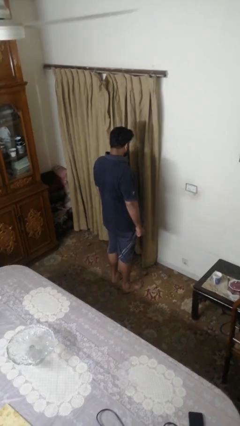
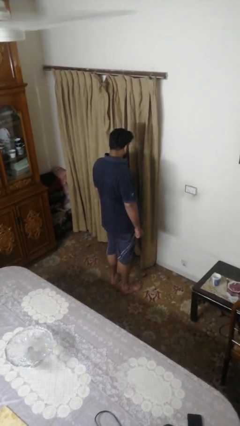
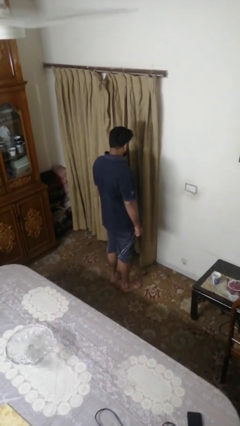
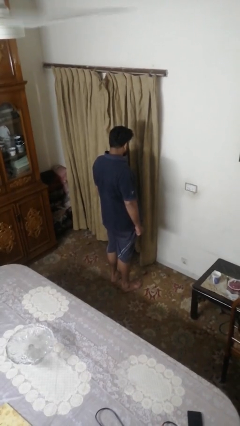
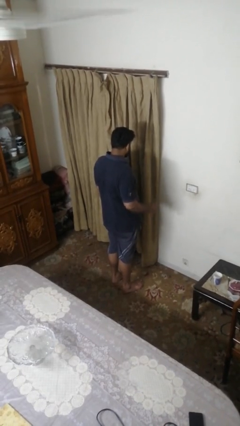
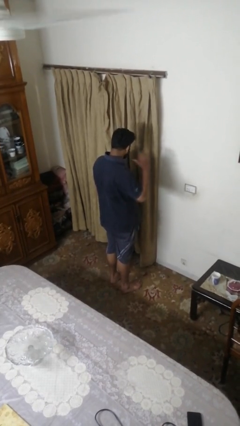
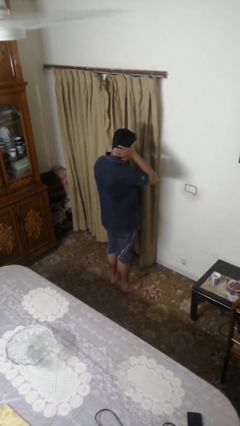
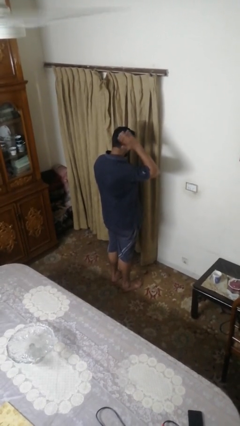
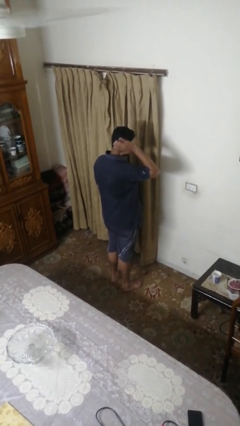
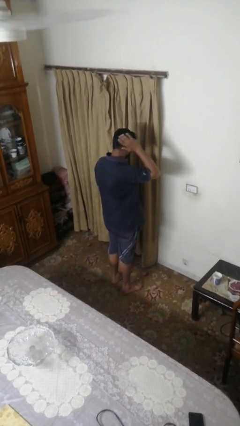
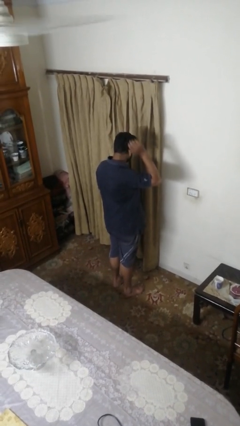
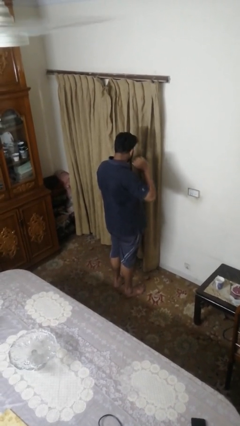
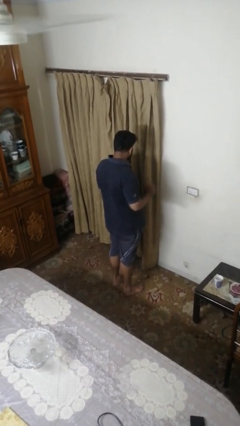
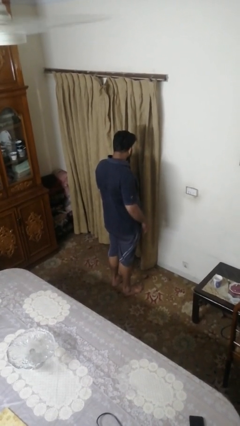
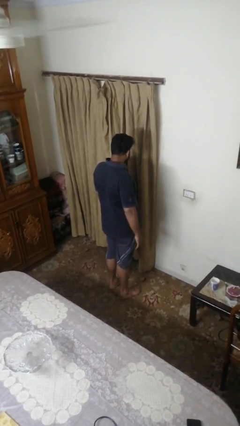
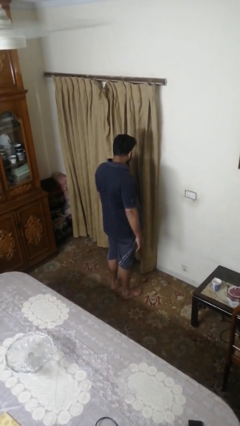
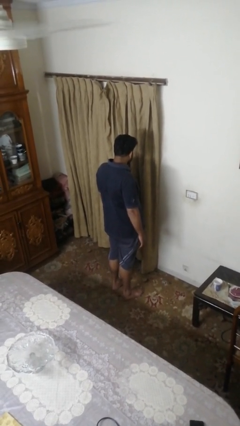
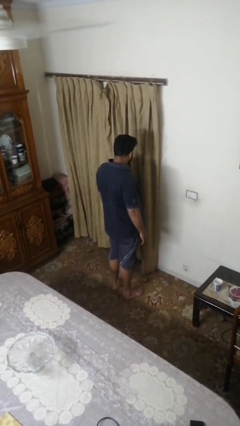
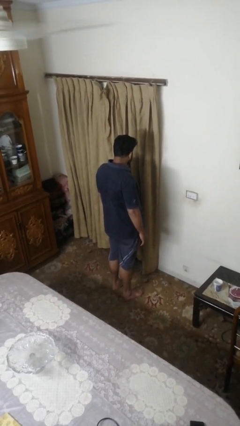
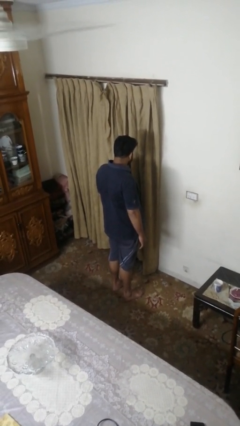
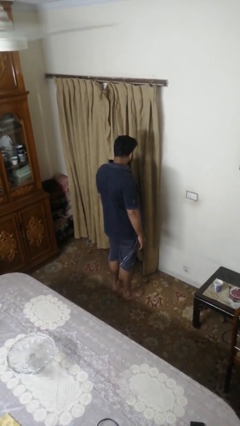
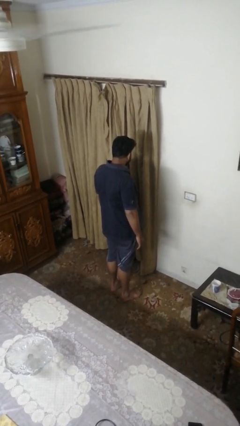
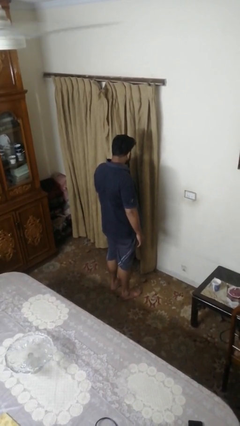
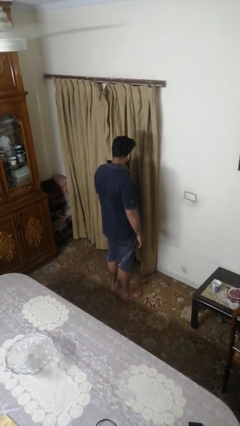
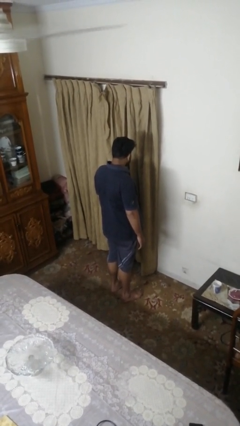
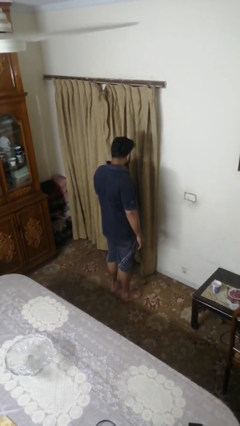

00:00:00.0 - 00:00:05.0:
person strokes hair

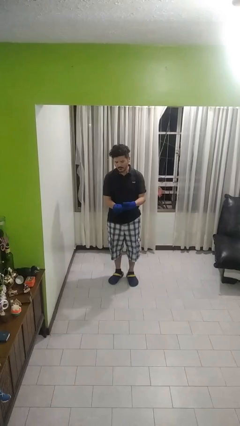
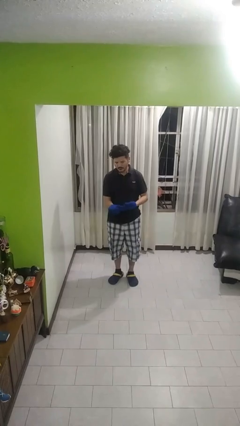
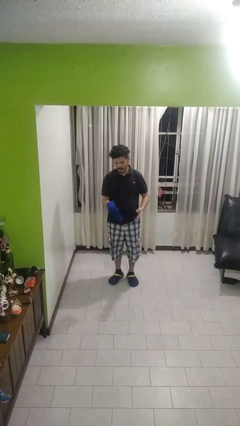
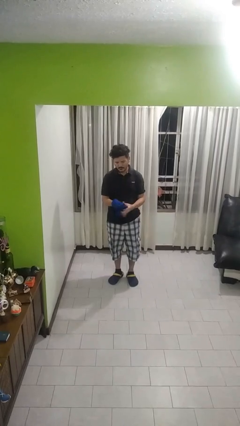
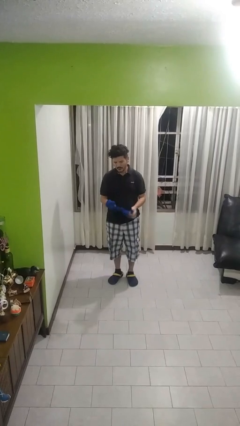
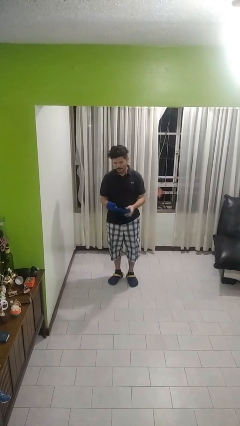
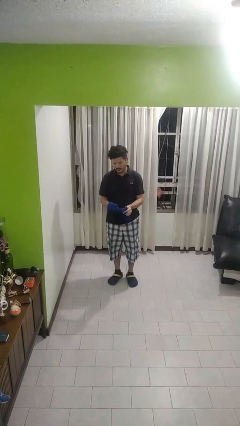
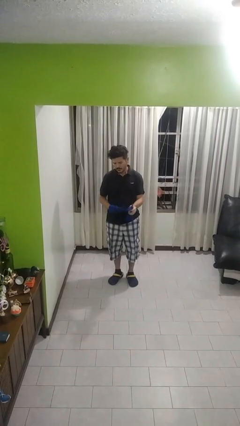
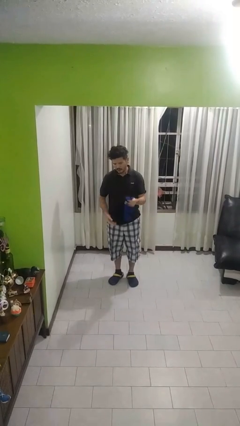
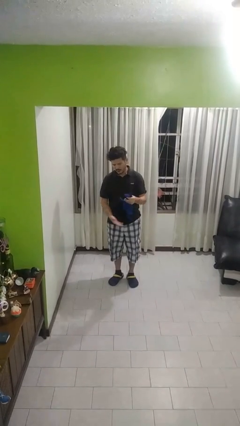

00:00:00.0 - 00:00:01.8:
person takes off gloves

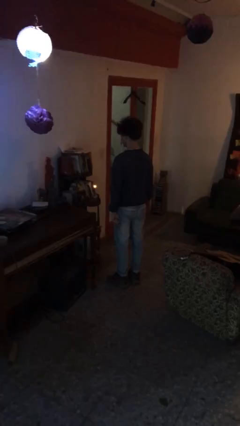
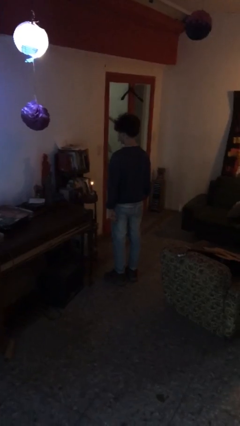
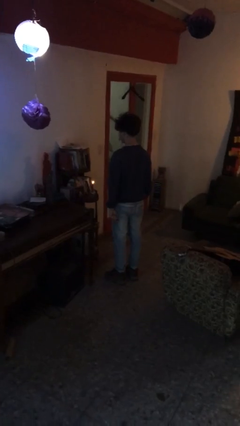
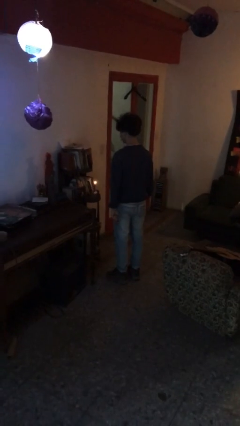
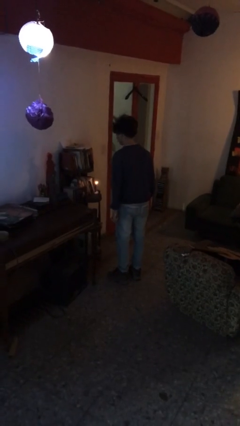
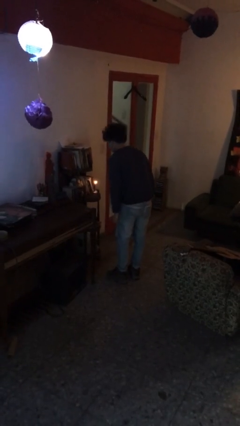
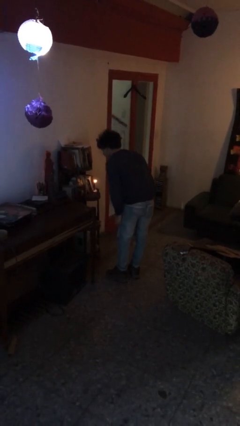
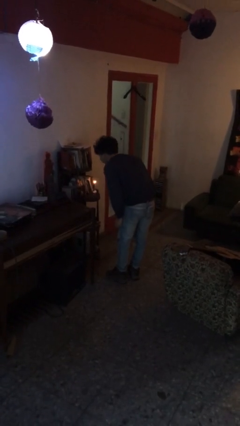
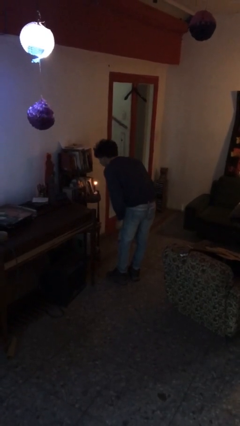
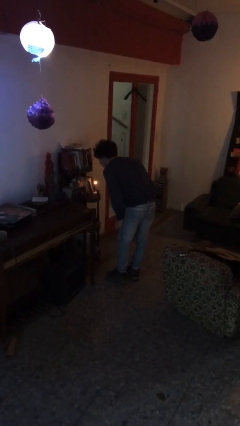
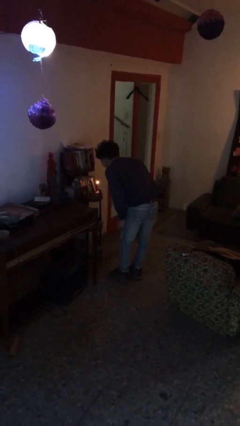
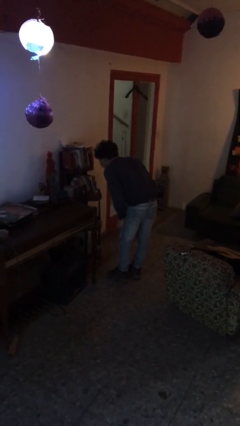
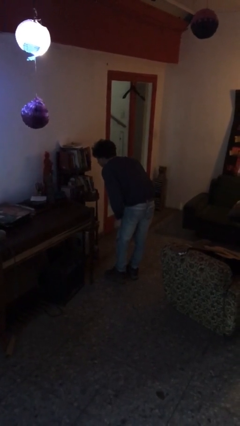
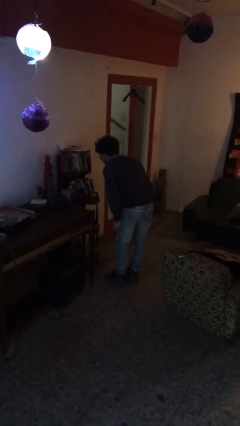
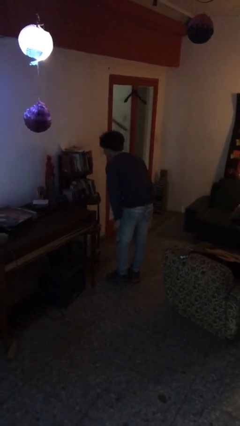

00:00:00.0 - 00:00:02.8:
person extinguishes candle

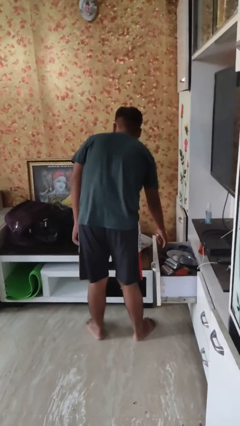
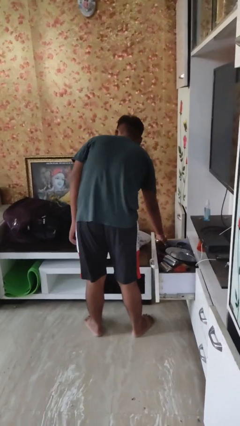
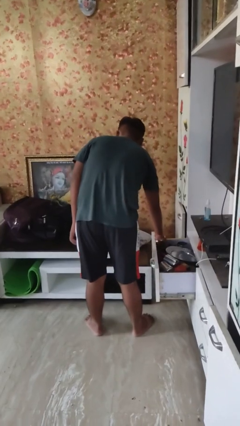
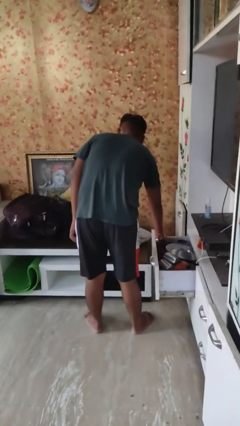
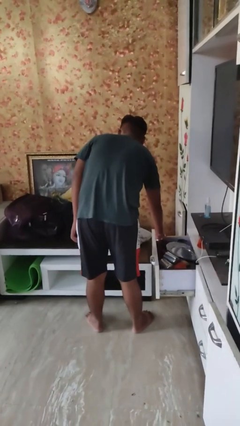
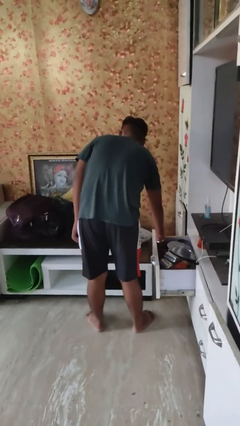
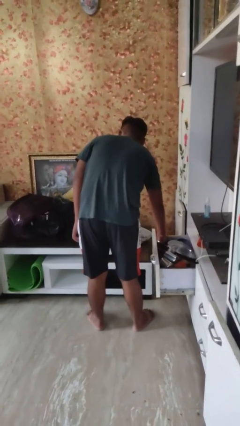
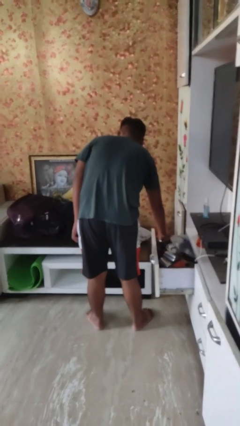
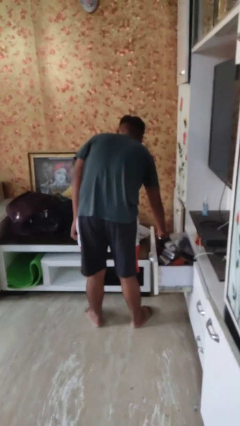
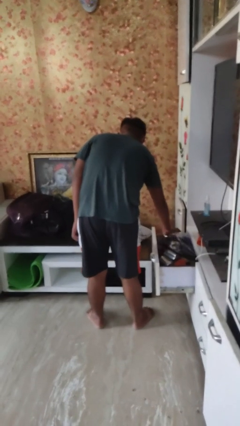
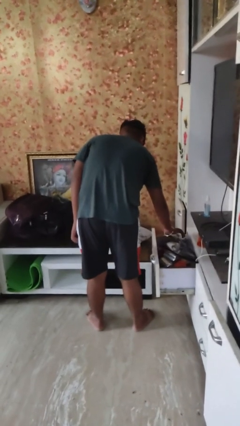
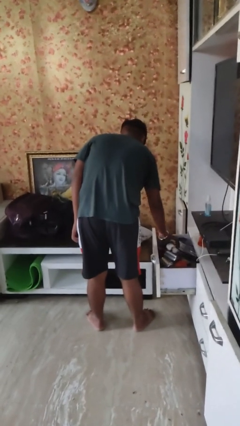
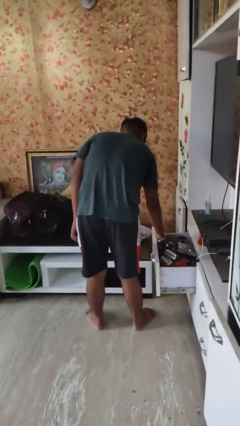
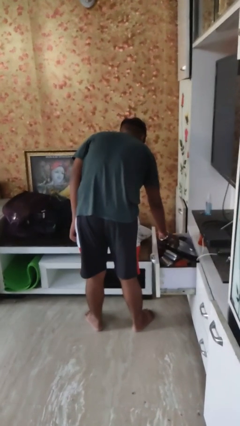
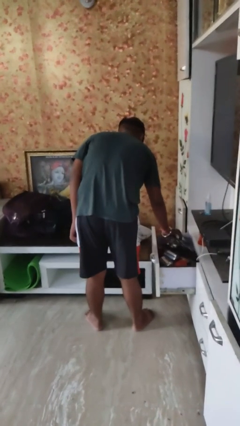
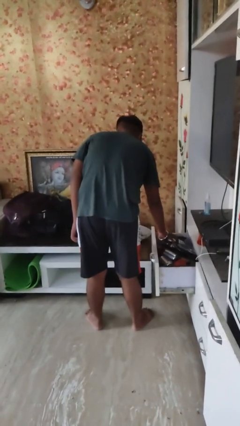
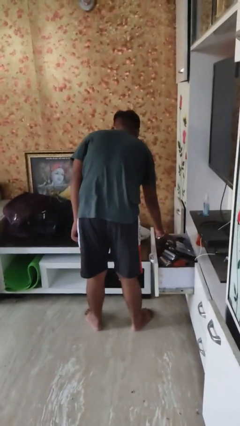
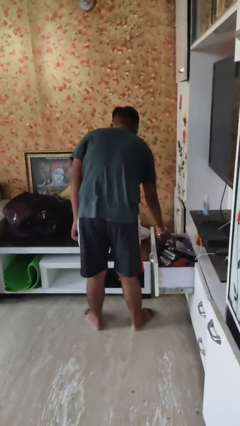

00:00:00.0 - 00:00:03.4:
person searches in kitchen drawer

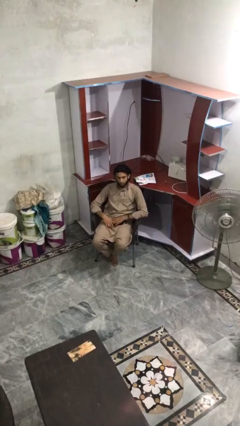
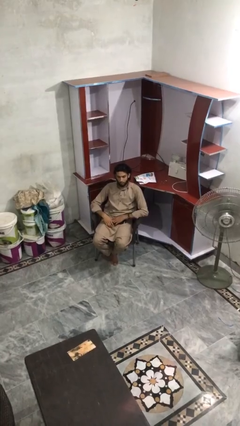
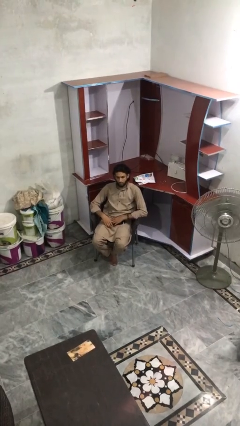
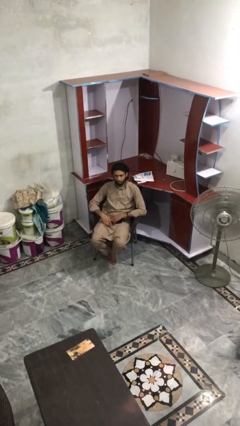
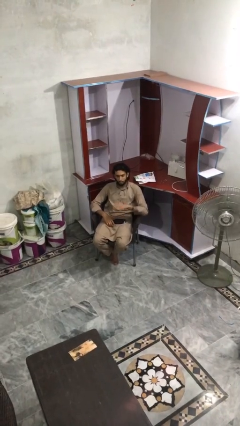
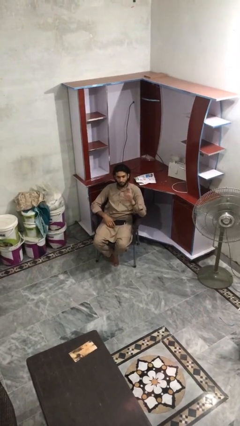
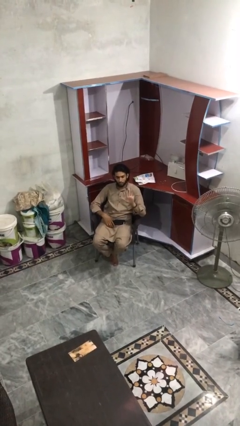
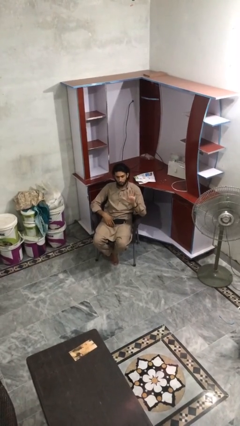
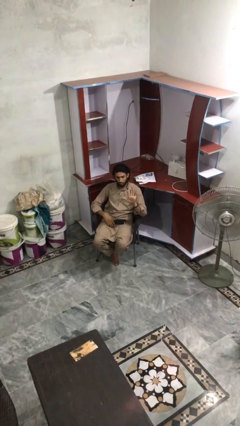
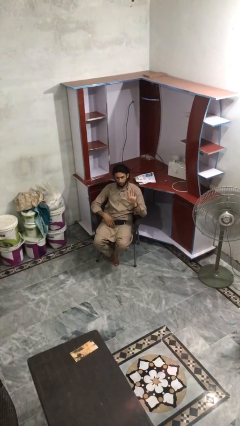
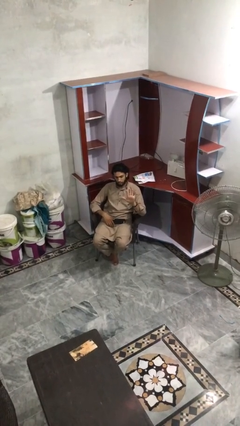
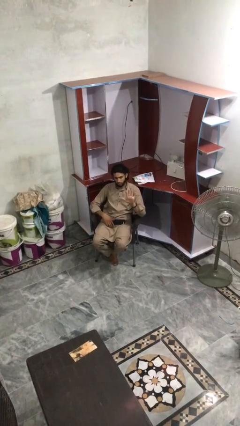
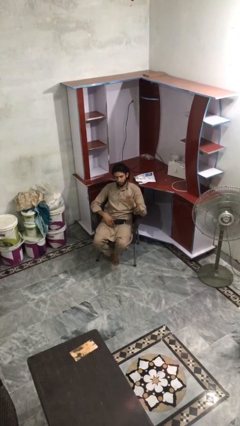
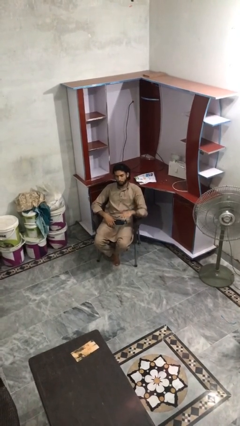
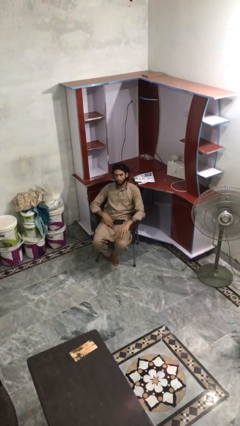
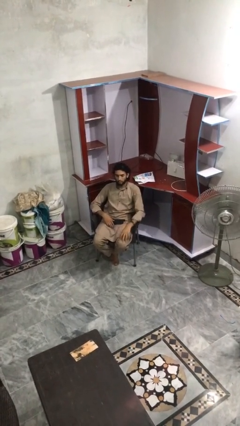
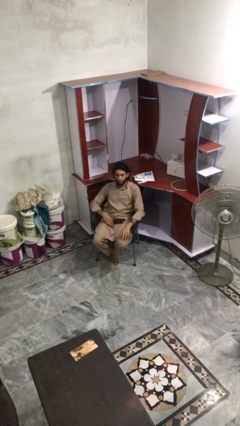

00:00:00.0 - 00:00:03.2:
person gestures number five

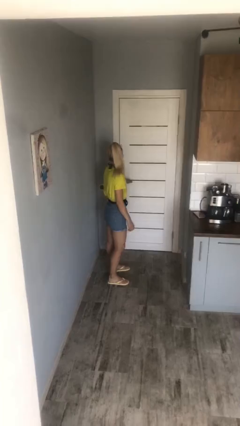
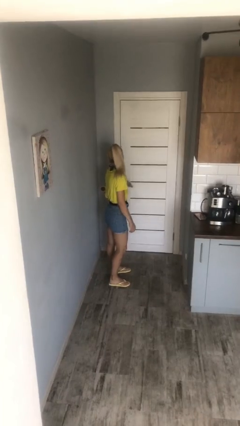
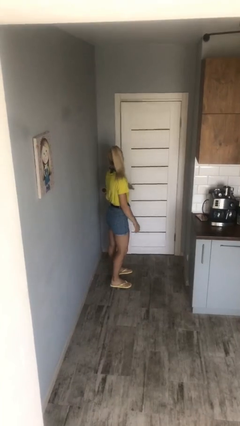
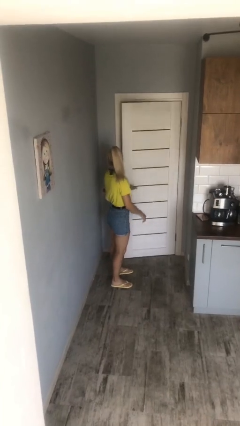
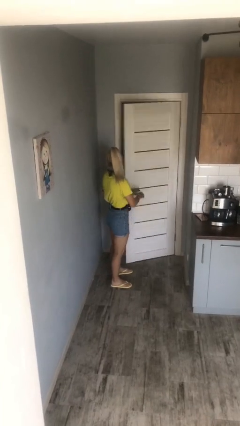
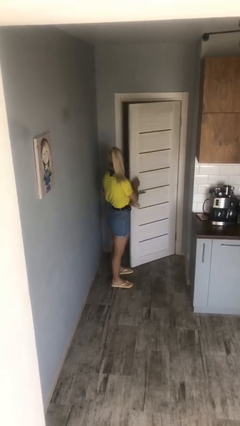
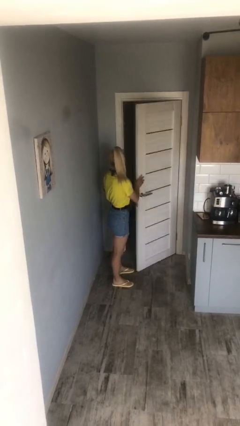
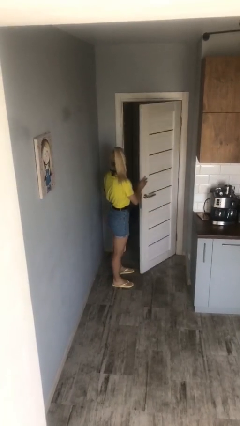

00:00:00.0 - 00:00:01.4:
person opens facility door
